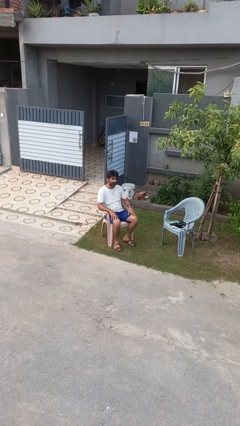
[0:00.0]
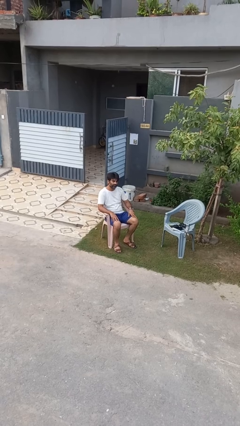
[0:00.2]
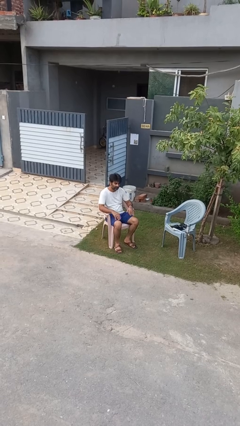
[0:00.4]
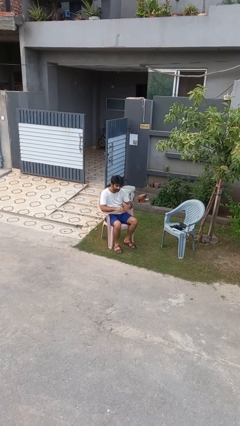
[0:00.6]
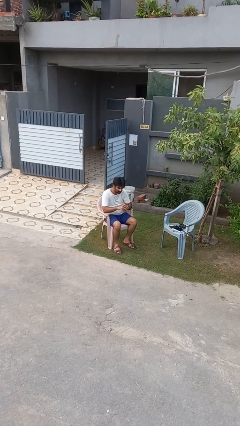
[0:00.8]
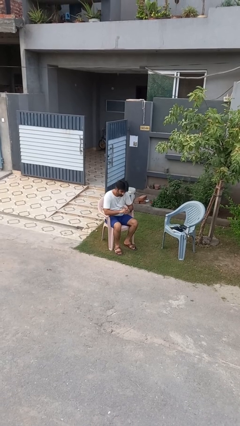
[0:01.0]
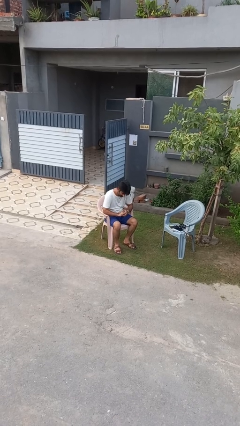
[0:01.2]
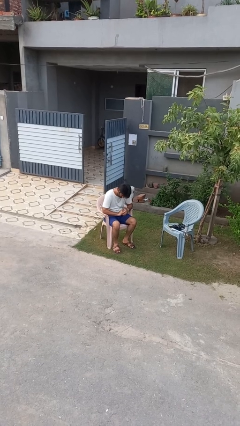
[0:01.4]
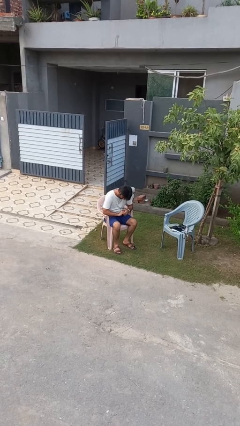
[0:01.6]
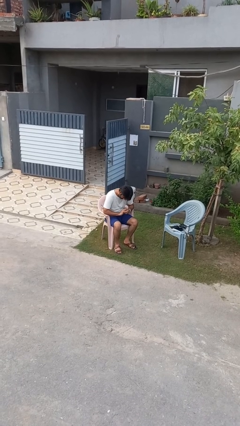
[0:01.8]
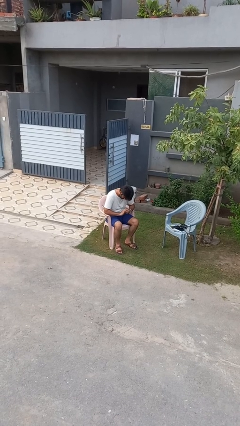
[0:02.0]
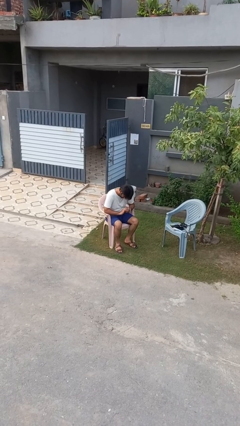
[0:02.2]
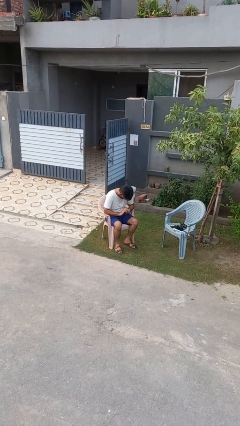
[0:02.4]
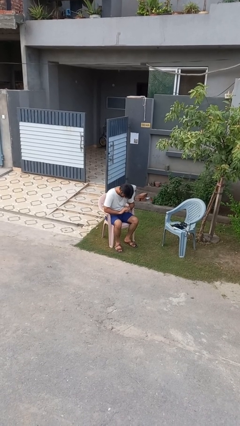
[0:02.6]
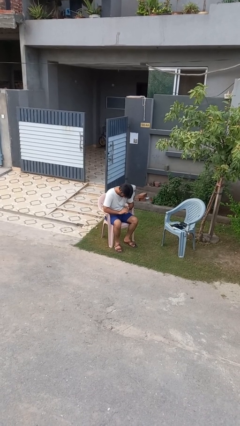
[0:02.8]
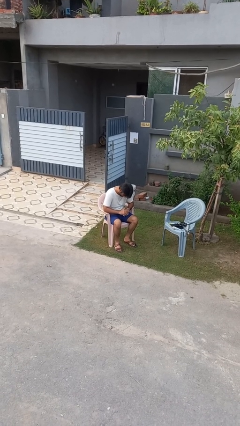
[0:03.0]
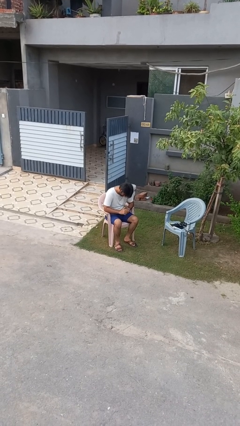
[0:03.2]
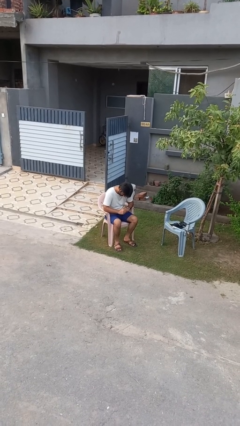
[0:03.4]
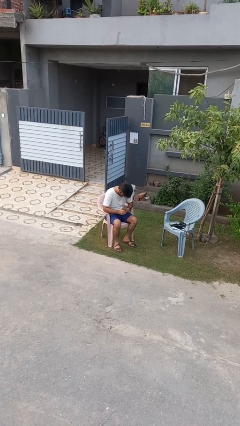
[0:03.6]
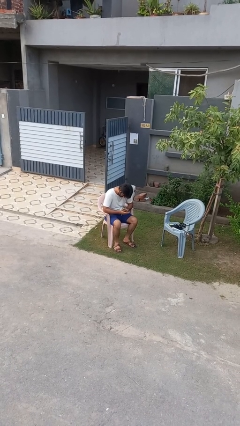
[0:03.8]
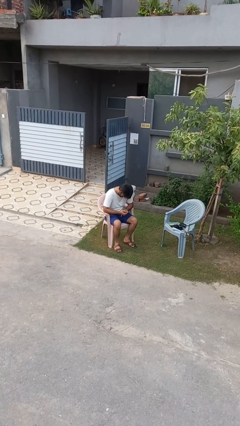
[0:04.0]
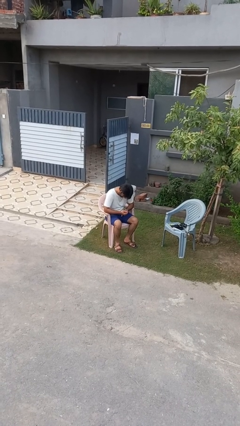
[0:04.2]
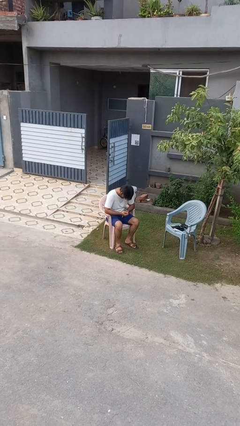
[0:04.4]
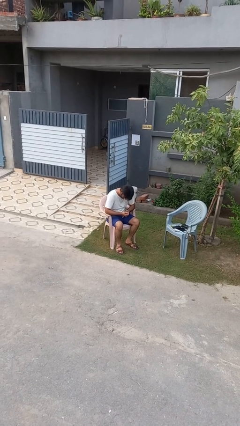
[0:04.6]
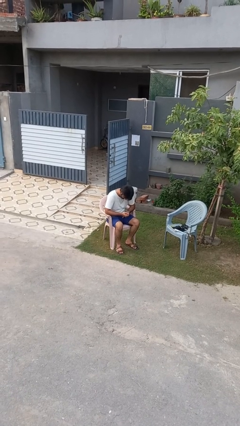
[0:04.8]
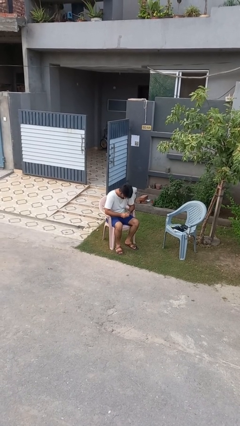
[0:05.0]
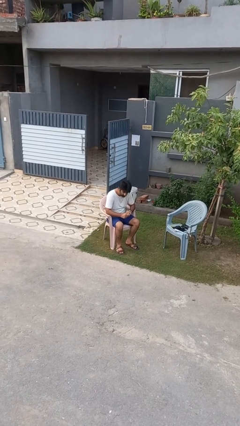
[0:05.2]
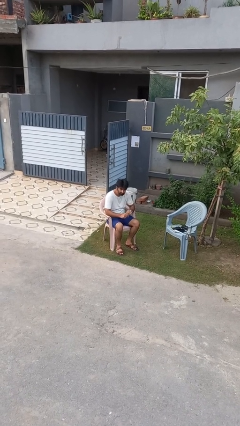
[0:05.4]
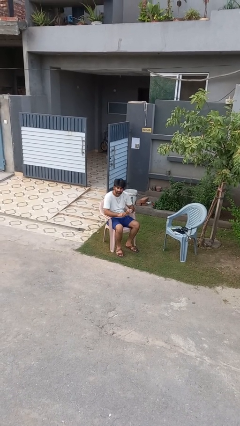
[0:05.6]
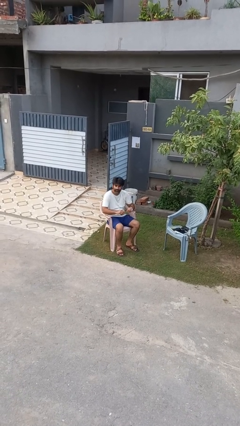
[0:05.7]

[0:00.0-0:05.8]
person looks at hands in lap

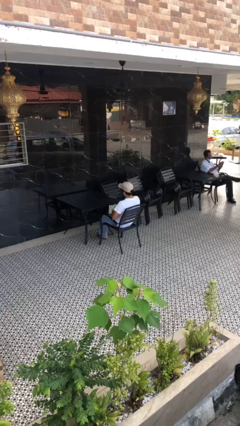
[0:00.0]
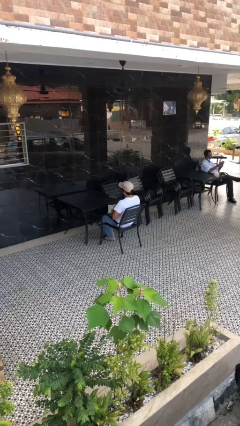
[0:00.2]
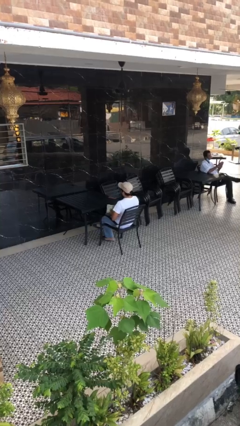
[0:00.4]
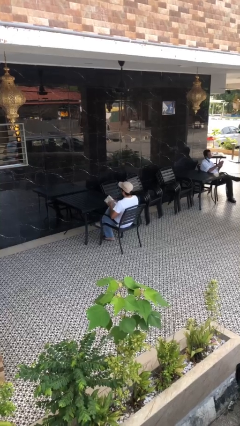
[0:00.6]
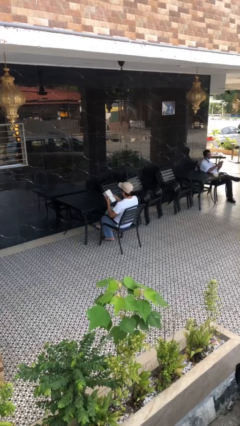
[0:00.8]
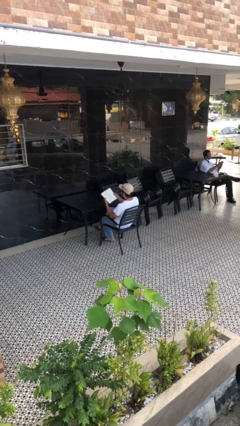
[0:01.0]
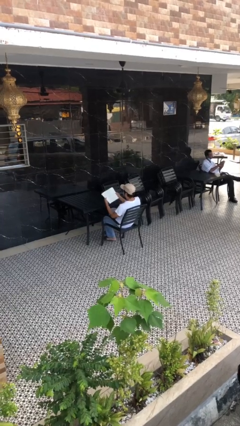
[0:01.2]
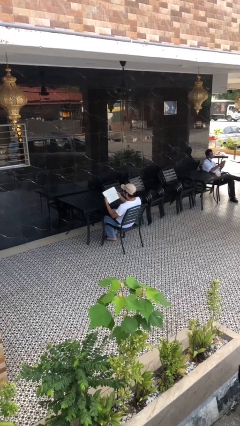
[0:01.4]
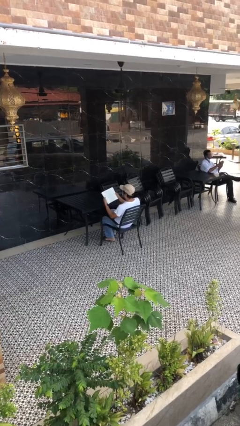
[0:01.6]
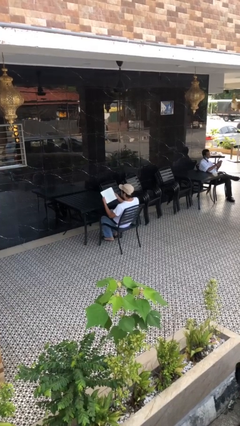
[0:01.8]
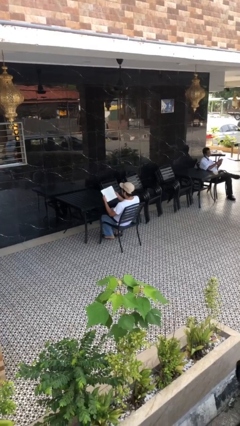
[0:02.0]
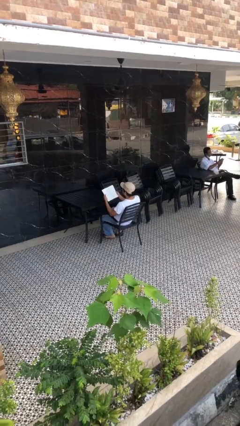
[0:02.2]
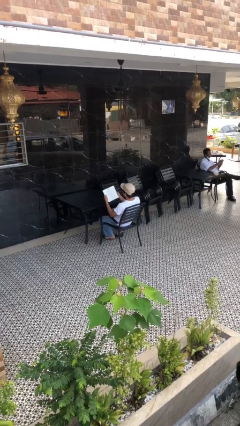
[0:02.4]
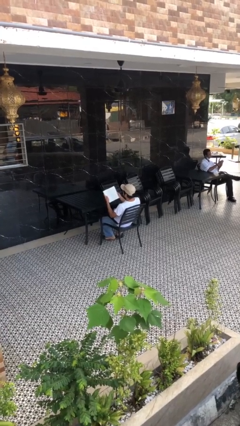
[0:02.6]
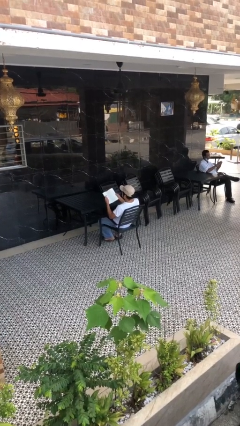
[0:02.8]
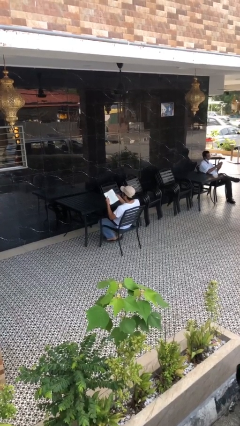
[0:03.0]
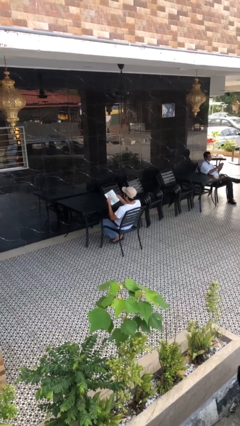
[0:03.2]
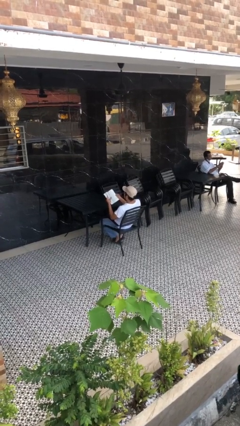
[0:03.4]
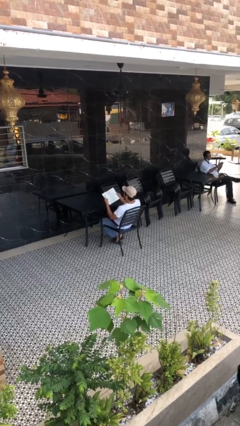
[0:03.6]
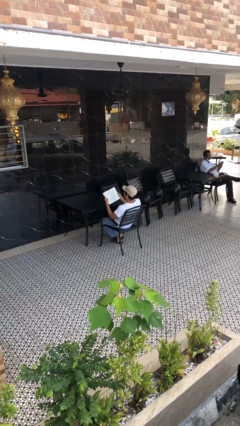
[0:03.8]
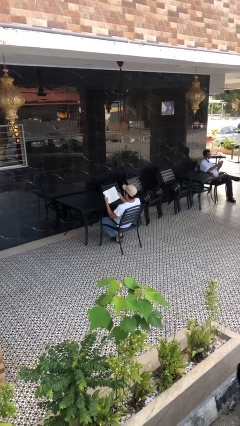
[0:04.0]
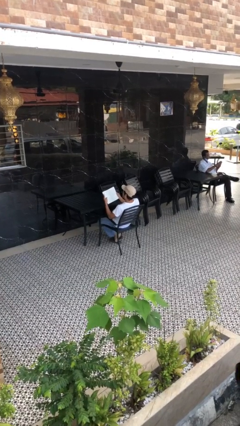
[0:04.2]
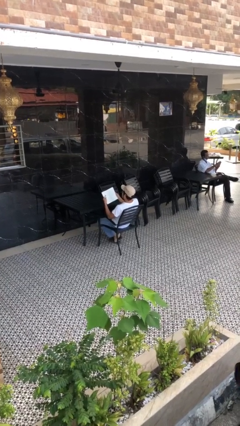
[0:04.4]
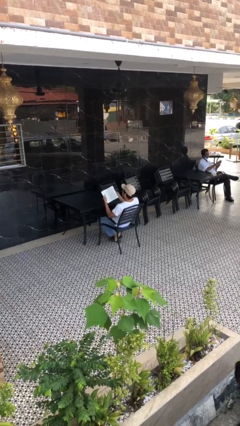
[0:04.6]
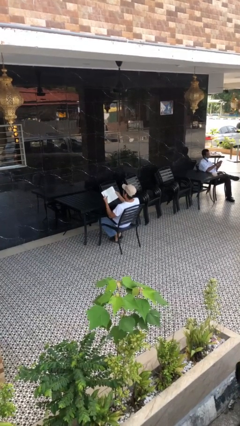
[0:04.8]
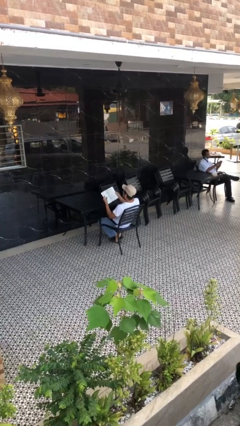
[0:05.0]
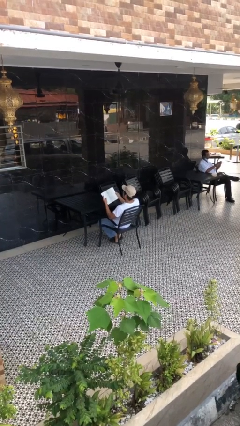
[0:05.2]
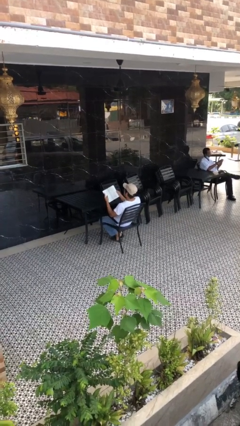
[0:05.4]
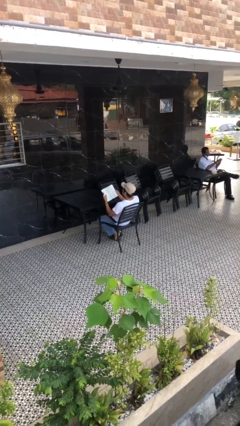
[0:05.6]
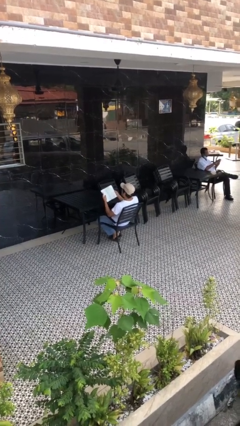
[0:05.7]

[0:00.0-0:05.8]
person reads document

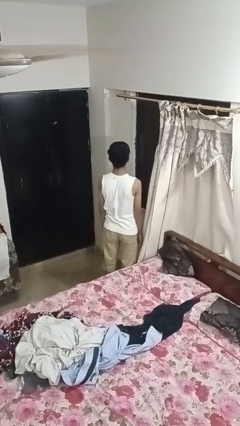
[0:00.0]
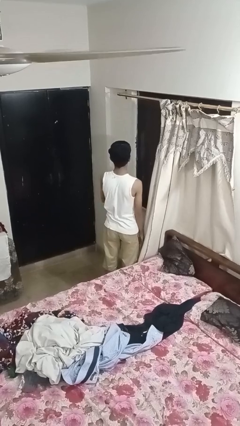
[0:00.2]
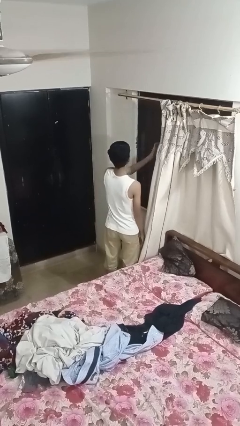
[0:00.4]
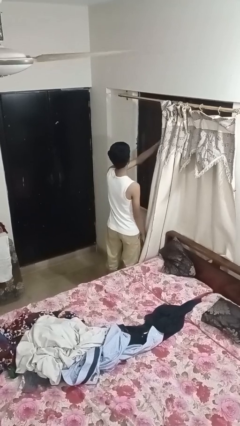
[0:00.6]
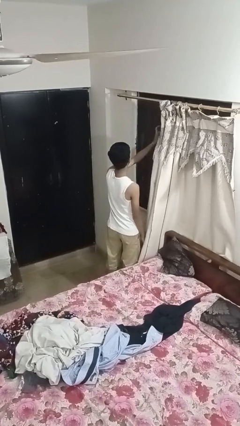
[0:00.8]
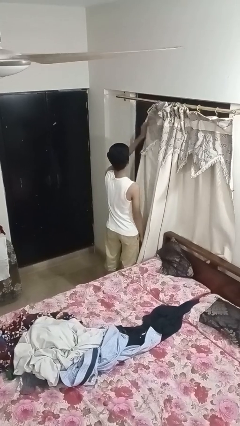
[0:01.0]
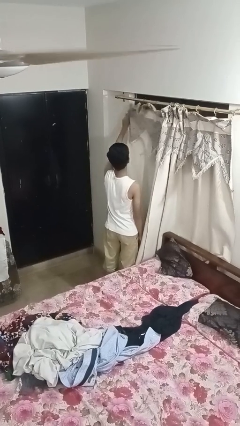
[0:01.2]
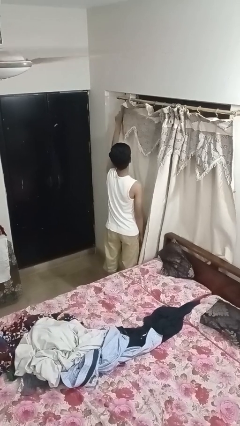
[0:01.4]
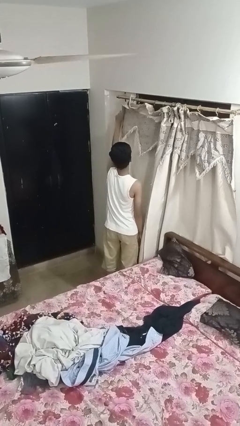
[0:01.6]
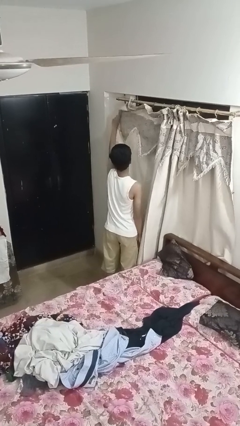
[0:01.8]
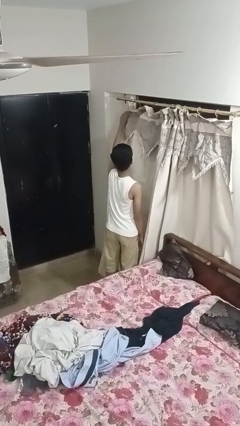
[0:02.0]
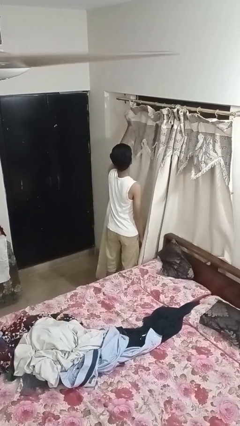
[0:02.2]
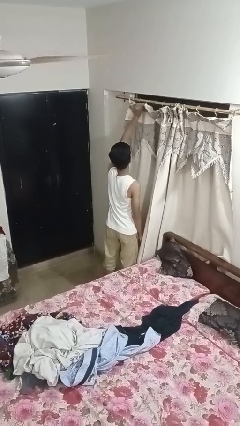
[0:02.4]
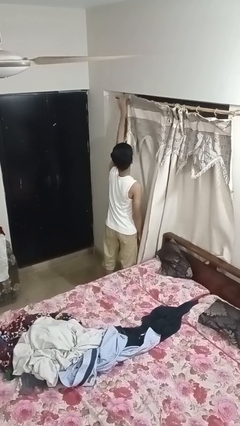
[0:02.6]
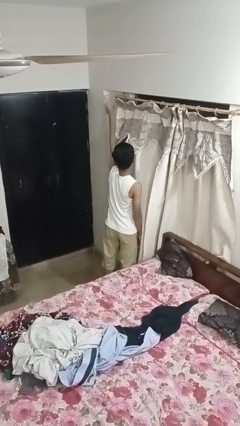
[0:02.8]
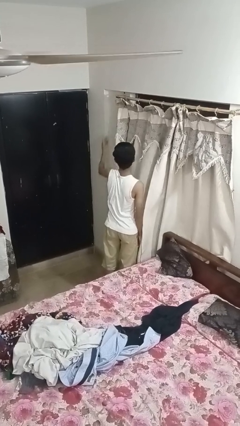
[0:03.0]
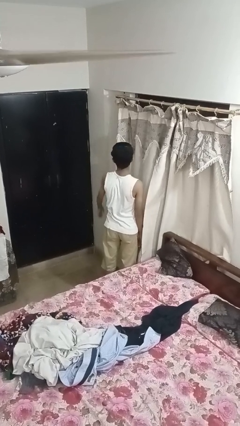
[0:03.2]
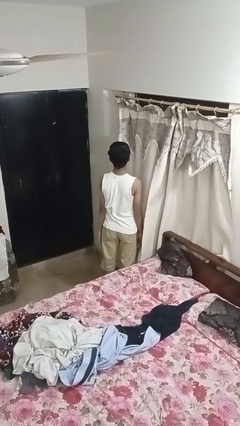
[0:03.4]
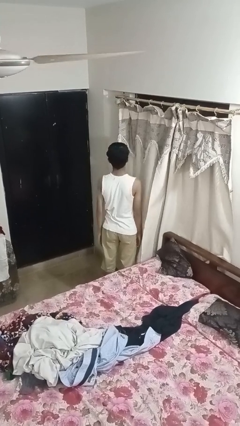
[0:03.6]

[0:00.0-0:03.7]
person closes curtains

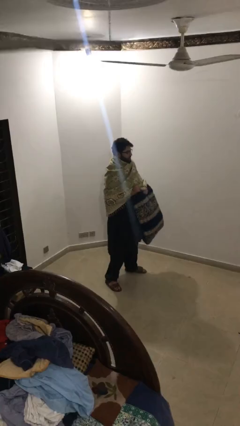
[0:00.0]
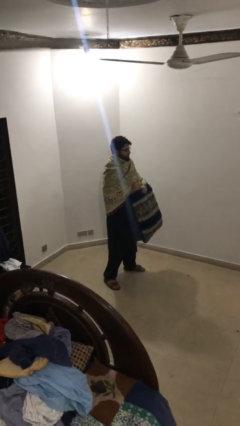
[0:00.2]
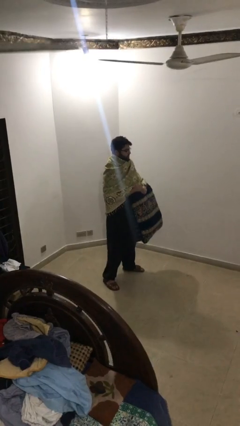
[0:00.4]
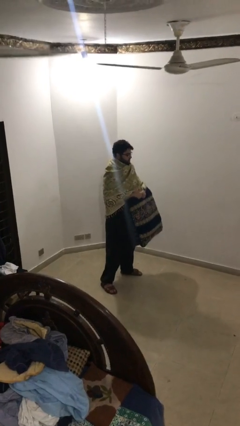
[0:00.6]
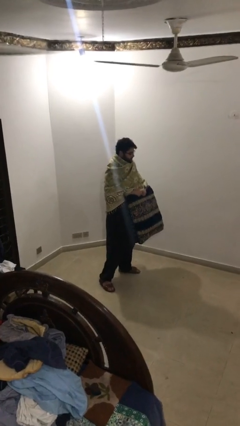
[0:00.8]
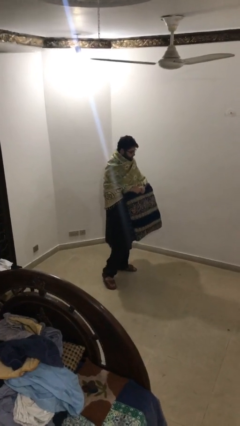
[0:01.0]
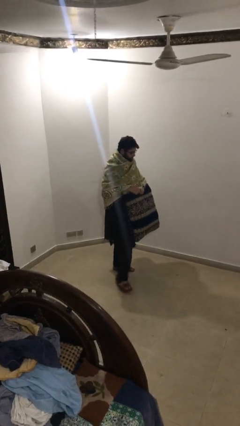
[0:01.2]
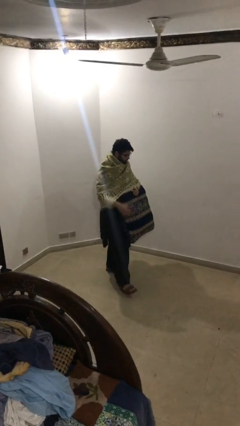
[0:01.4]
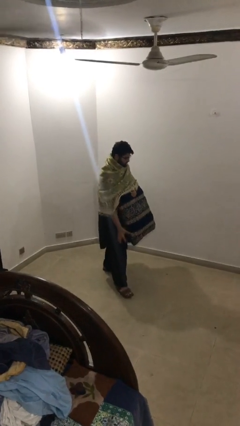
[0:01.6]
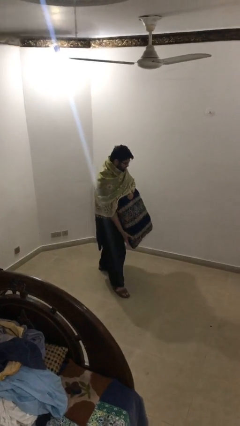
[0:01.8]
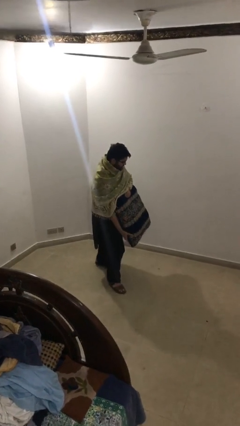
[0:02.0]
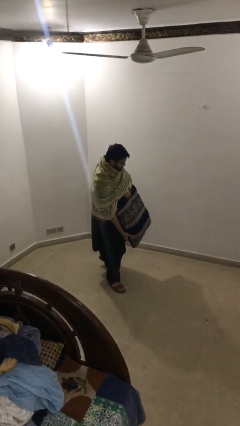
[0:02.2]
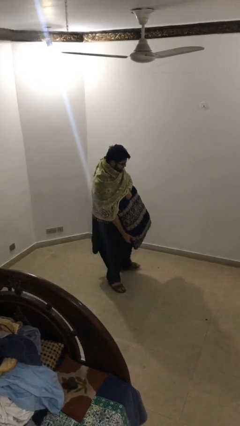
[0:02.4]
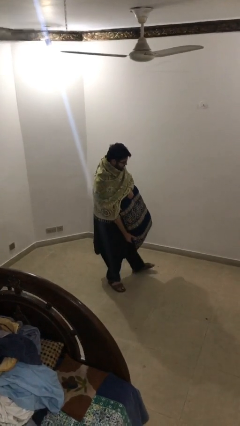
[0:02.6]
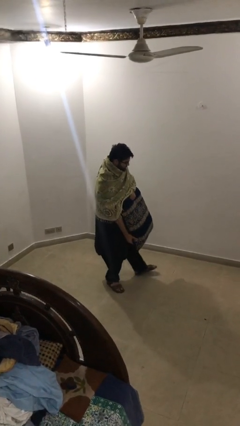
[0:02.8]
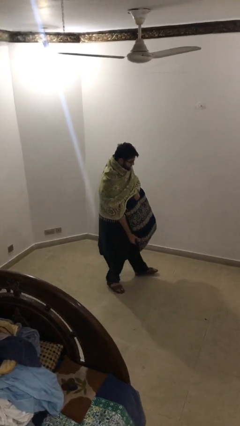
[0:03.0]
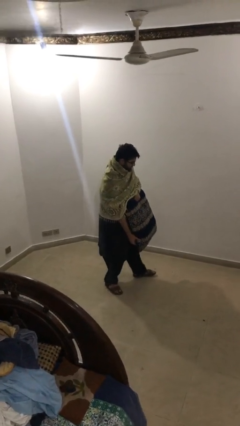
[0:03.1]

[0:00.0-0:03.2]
person carries heavy object
